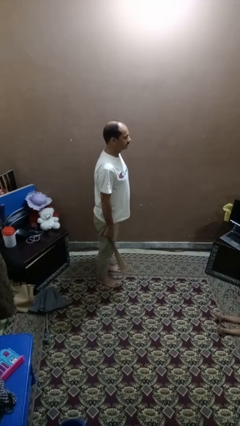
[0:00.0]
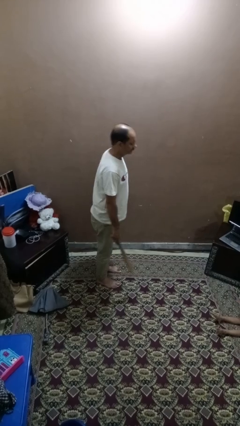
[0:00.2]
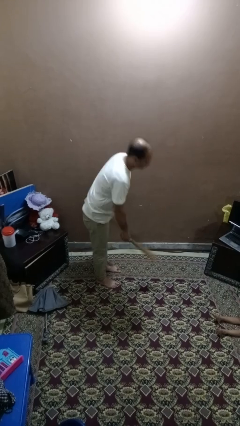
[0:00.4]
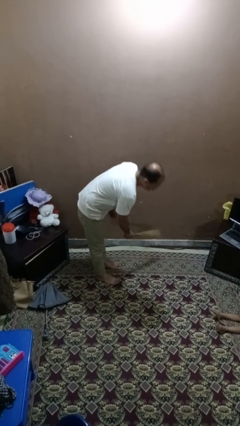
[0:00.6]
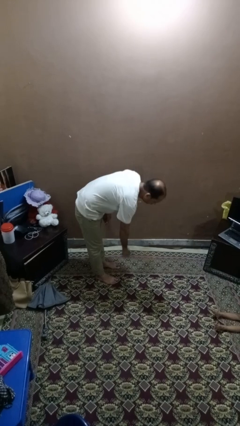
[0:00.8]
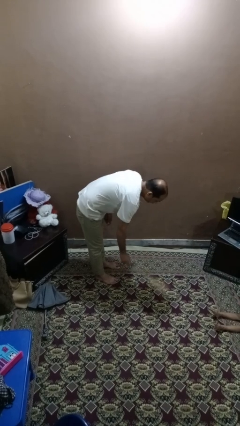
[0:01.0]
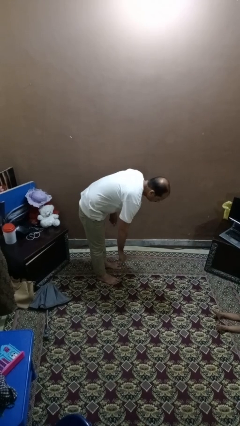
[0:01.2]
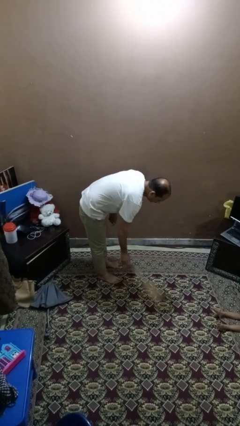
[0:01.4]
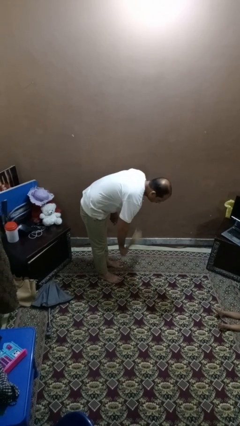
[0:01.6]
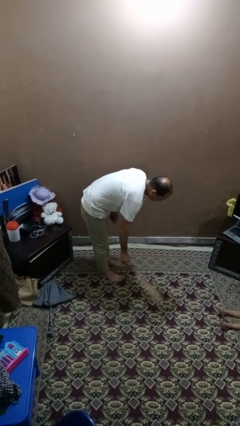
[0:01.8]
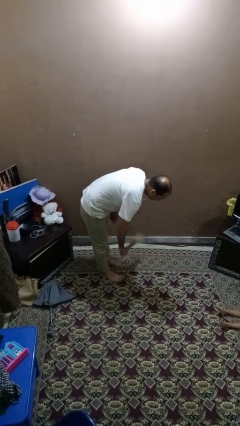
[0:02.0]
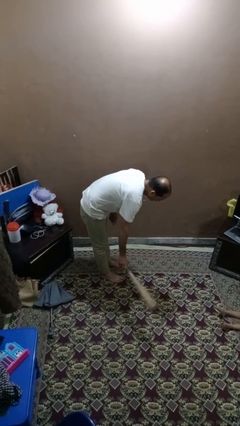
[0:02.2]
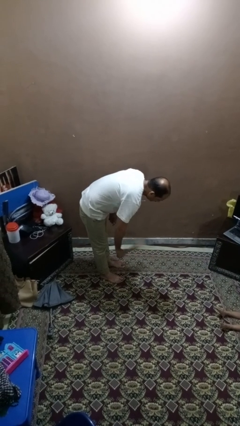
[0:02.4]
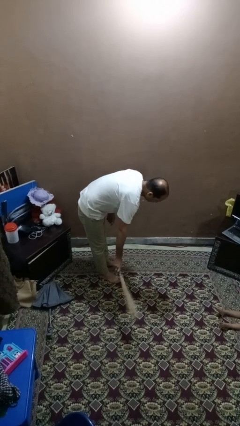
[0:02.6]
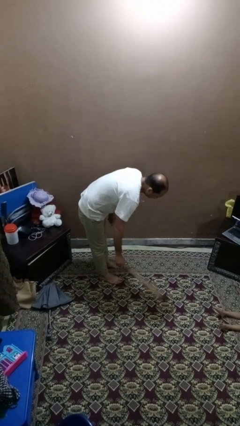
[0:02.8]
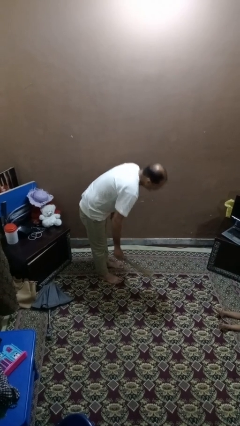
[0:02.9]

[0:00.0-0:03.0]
person sweeps floor

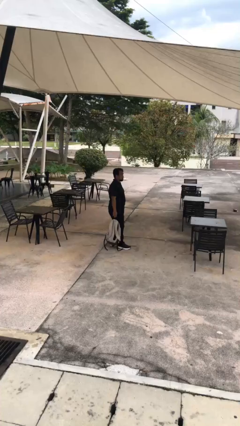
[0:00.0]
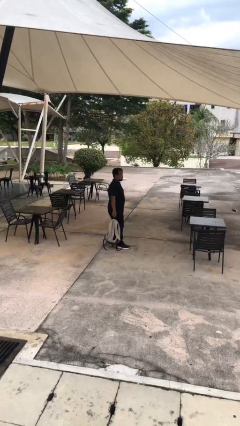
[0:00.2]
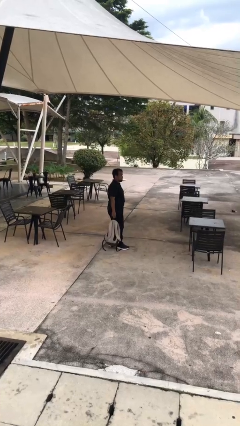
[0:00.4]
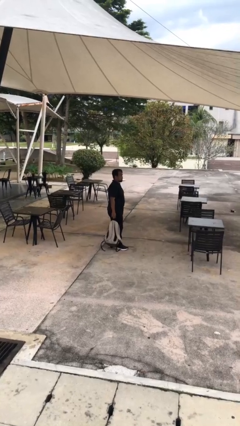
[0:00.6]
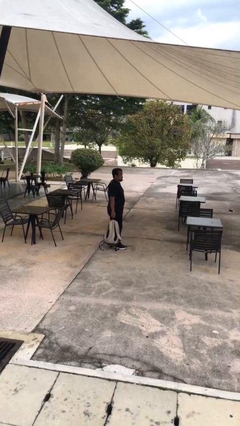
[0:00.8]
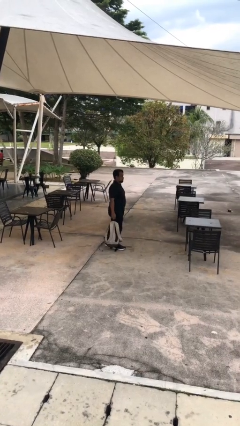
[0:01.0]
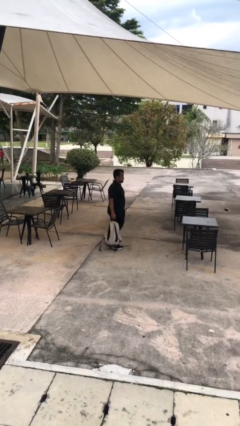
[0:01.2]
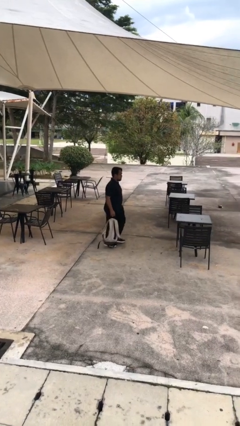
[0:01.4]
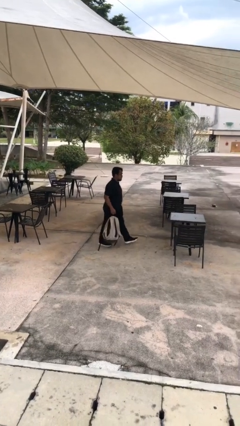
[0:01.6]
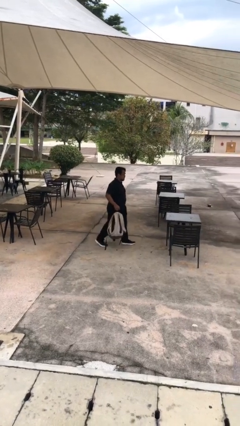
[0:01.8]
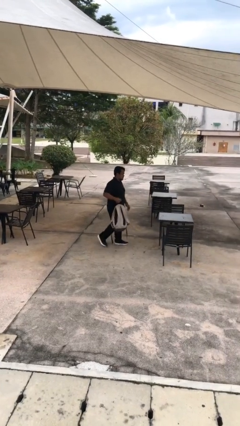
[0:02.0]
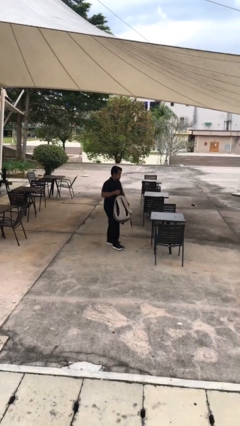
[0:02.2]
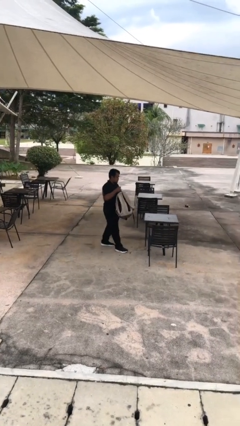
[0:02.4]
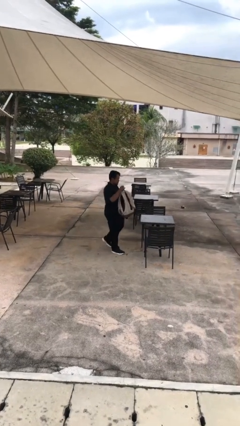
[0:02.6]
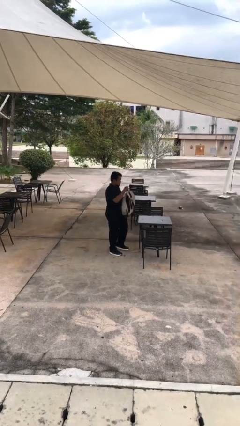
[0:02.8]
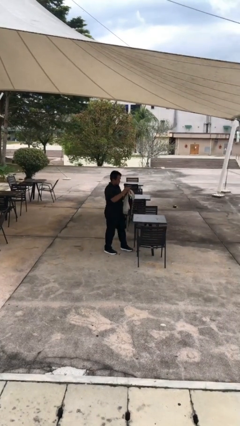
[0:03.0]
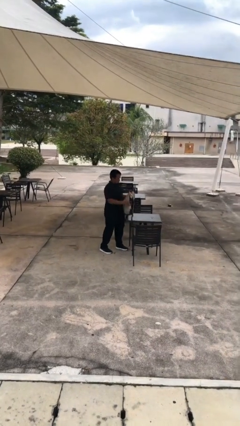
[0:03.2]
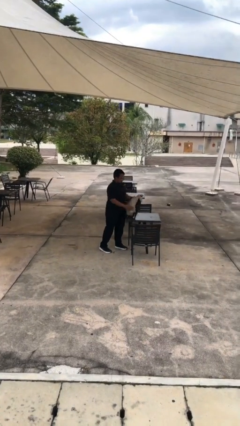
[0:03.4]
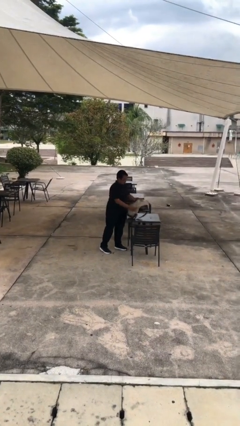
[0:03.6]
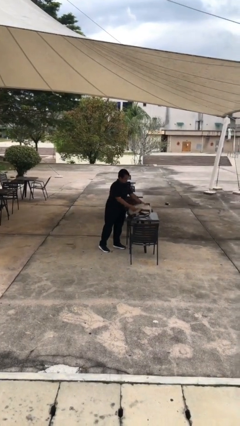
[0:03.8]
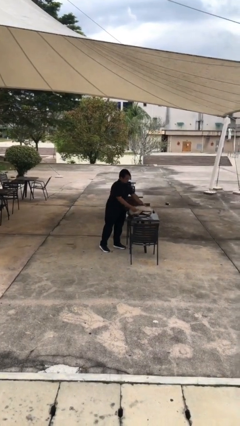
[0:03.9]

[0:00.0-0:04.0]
person puts down object on table

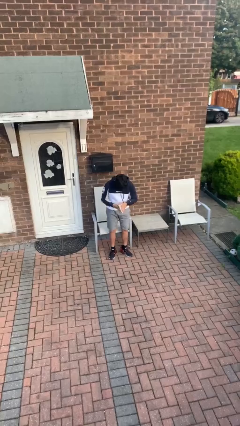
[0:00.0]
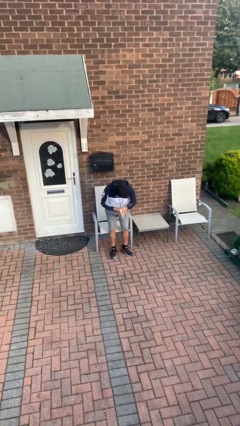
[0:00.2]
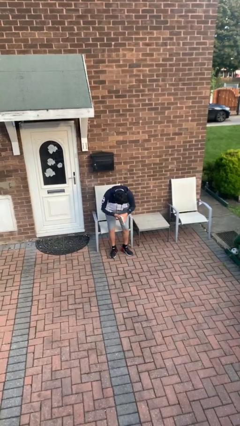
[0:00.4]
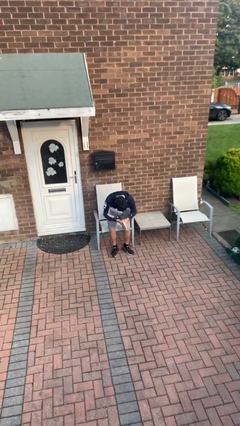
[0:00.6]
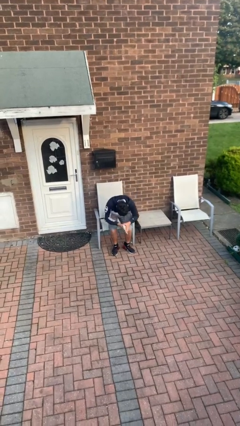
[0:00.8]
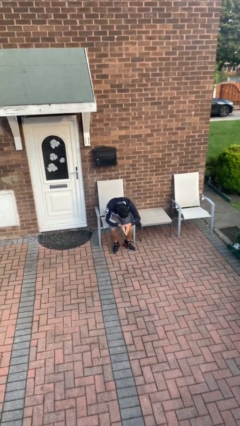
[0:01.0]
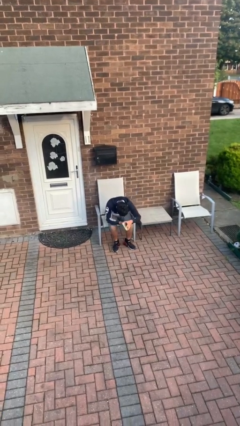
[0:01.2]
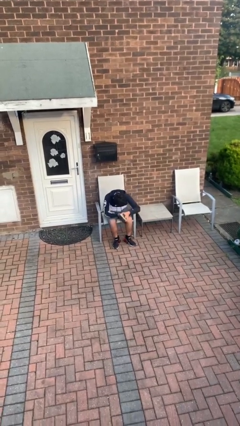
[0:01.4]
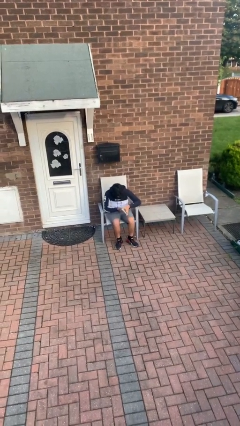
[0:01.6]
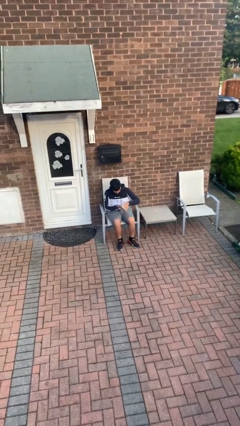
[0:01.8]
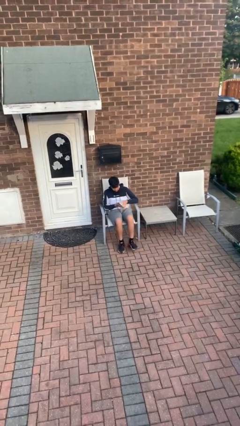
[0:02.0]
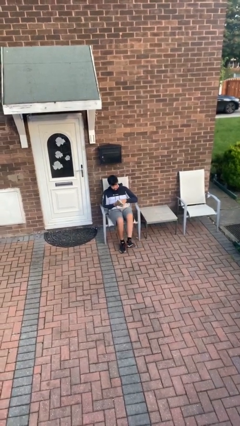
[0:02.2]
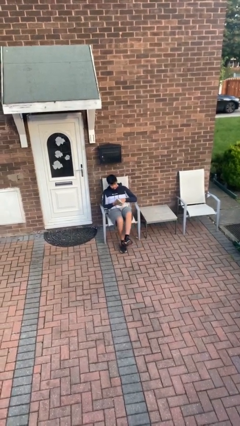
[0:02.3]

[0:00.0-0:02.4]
person sits down

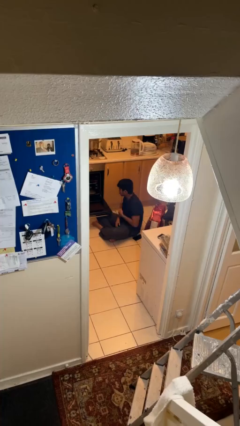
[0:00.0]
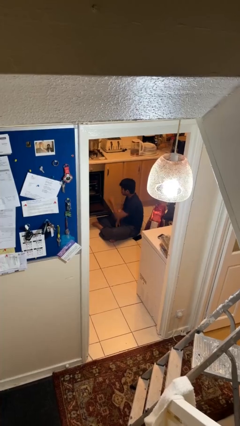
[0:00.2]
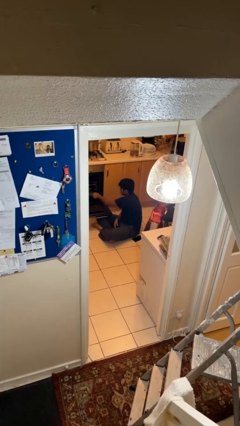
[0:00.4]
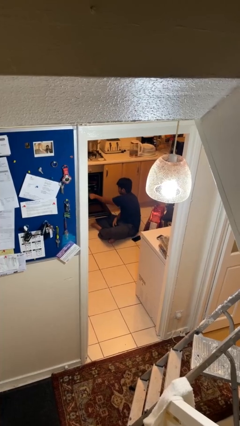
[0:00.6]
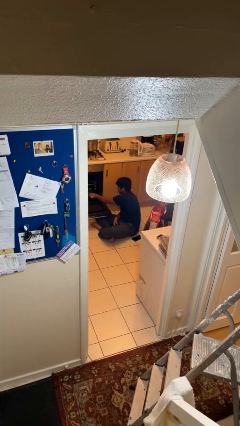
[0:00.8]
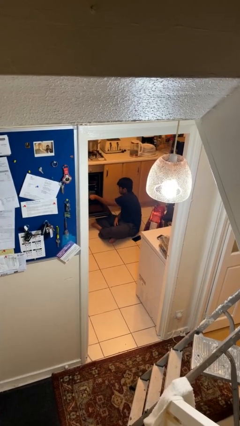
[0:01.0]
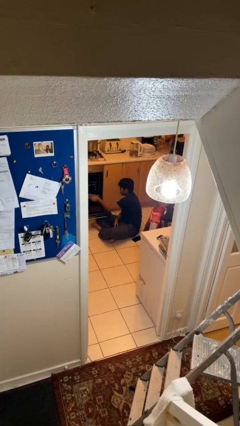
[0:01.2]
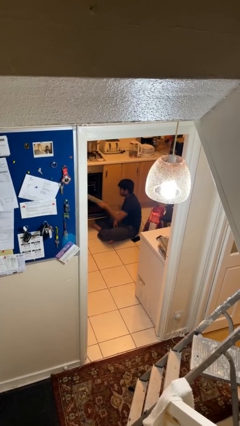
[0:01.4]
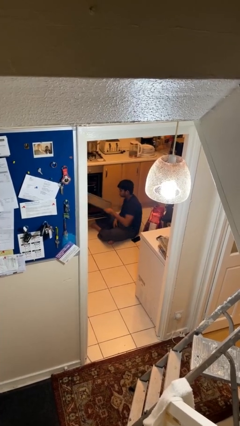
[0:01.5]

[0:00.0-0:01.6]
person takes object from oven

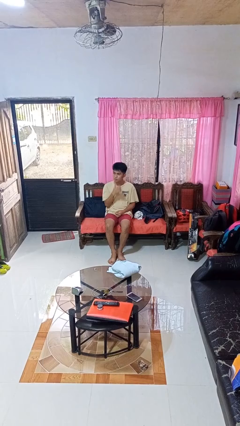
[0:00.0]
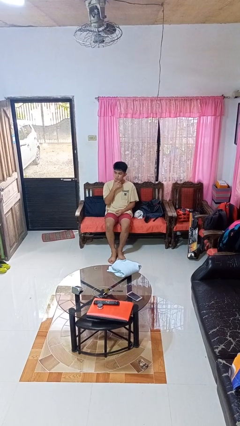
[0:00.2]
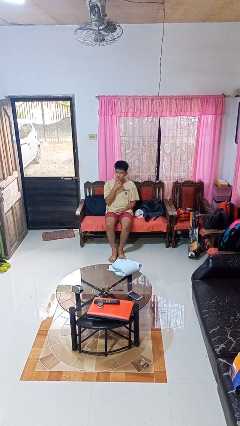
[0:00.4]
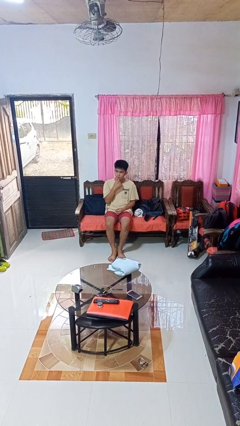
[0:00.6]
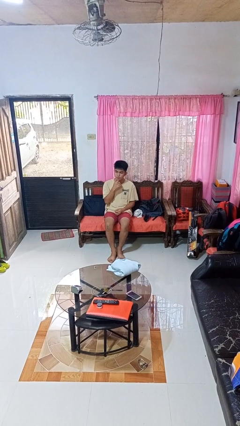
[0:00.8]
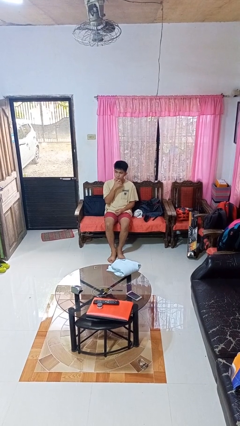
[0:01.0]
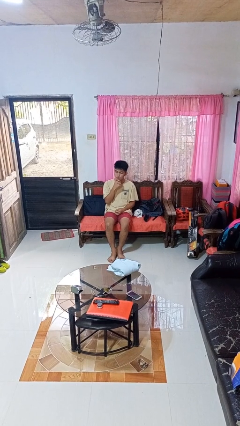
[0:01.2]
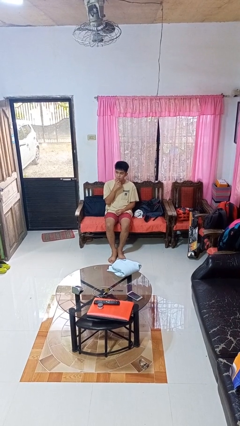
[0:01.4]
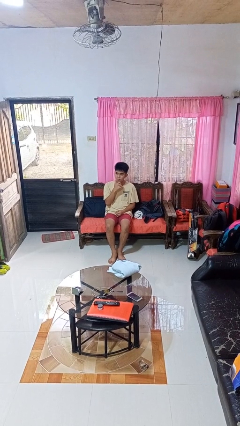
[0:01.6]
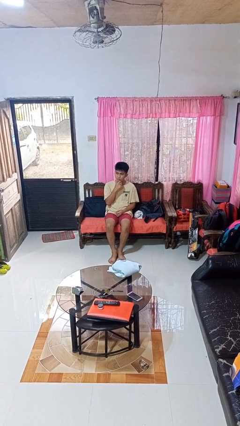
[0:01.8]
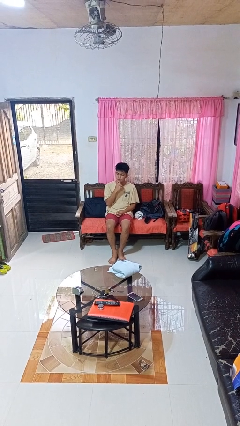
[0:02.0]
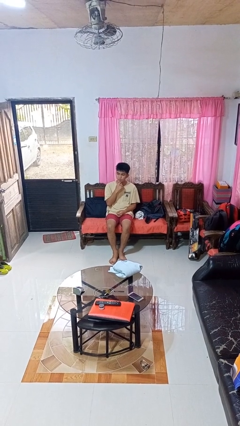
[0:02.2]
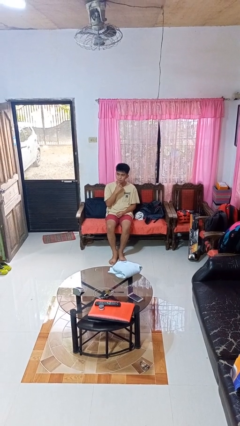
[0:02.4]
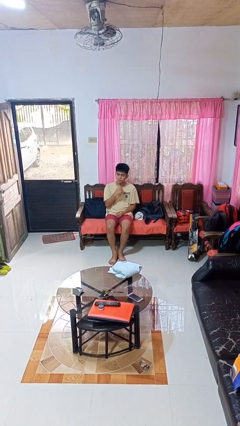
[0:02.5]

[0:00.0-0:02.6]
person strokes chin

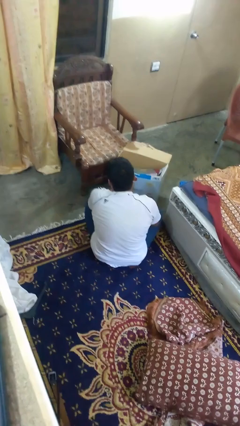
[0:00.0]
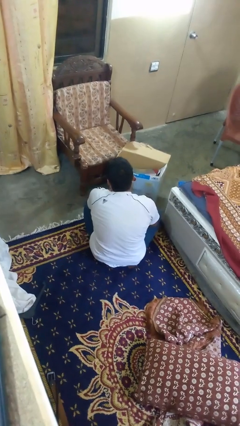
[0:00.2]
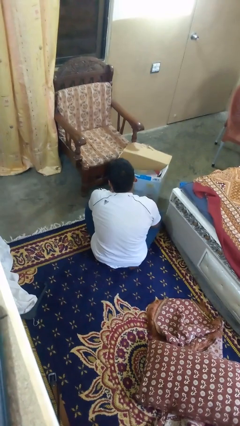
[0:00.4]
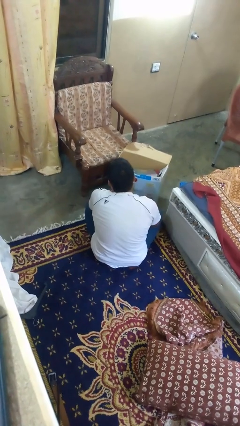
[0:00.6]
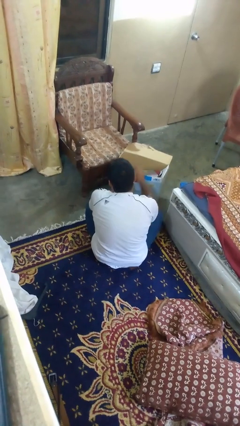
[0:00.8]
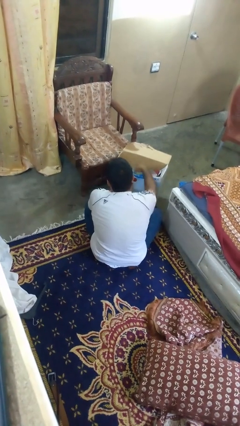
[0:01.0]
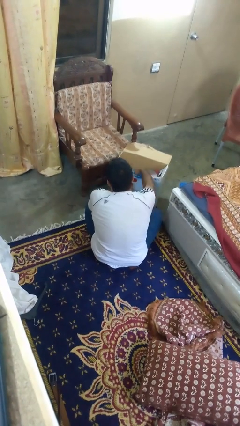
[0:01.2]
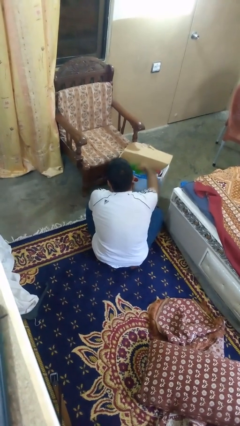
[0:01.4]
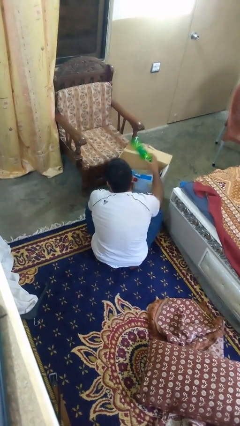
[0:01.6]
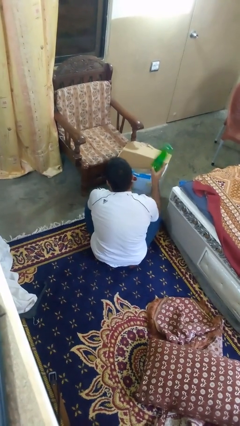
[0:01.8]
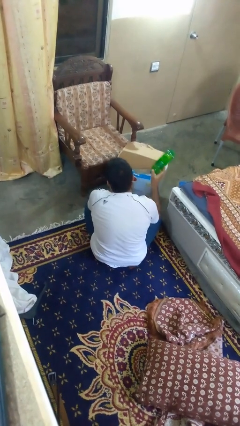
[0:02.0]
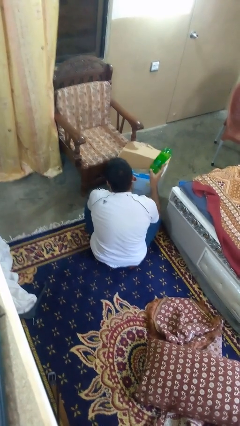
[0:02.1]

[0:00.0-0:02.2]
person takes object from box

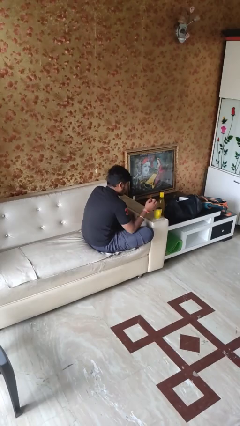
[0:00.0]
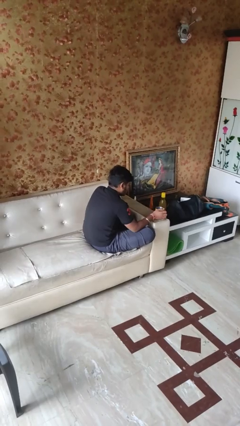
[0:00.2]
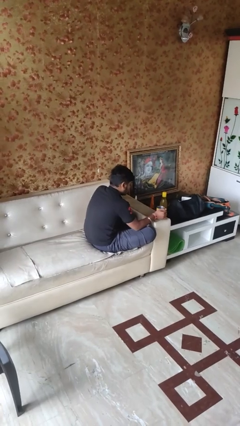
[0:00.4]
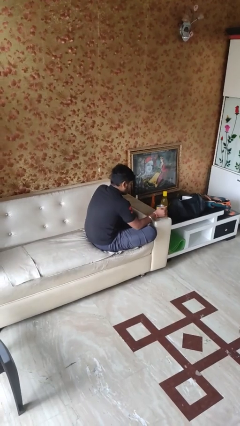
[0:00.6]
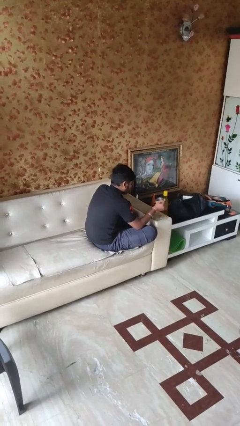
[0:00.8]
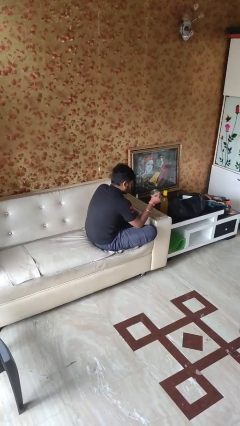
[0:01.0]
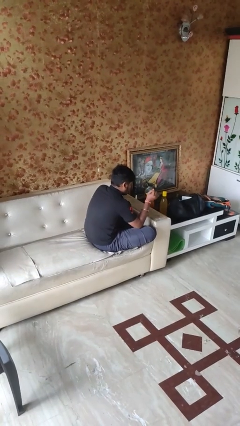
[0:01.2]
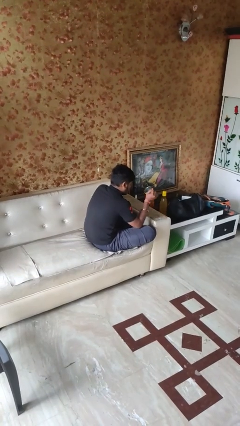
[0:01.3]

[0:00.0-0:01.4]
person picks up object from table
